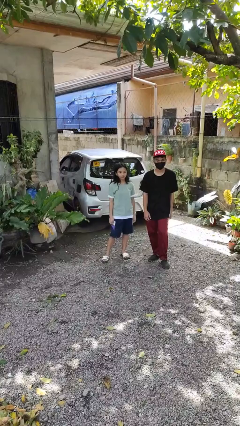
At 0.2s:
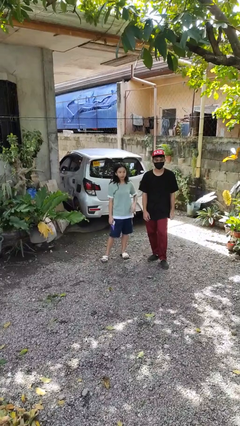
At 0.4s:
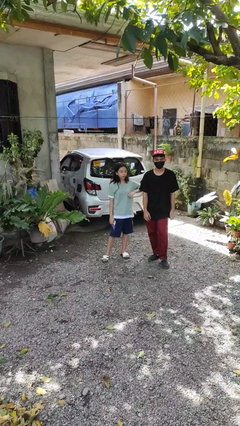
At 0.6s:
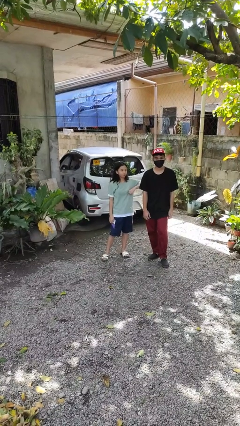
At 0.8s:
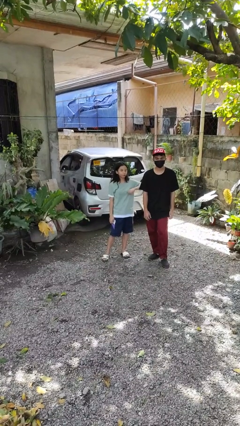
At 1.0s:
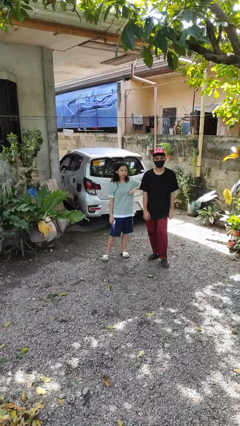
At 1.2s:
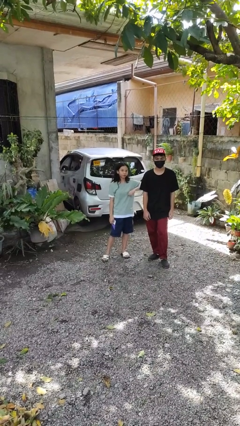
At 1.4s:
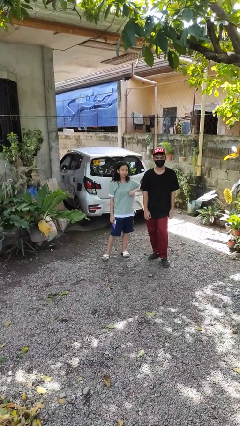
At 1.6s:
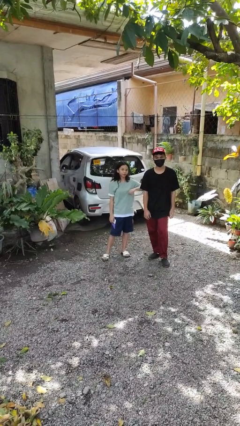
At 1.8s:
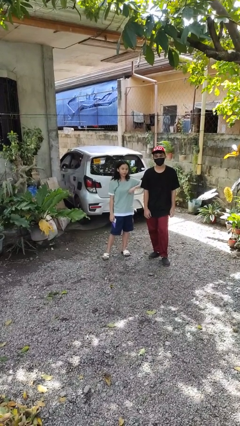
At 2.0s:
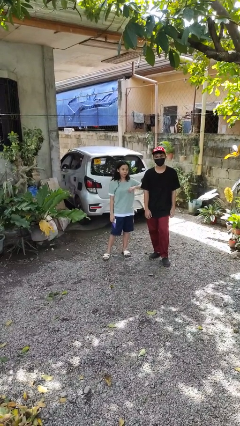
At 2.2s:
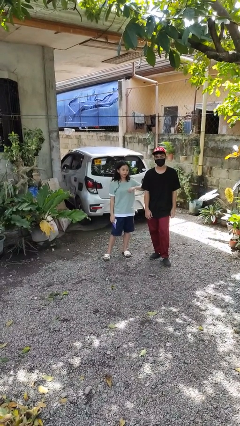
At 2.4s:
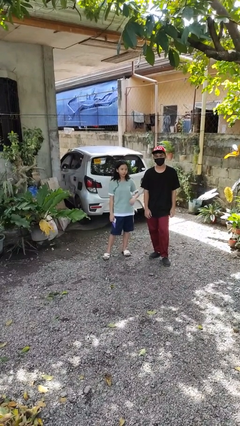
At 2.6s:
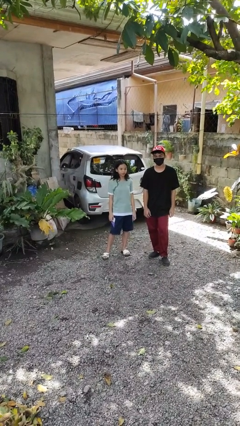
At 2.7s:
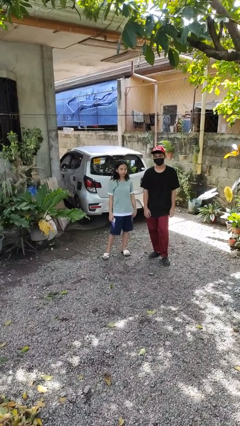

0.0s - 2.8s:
person nudges person with elbow

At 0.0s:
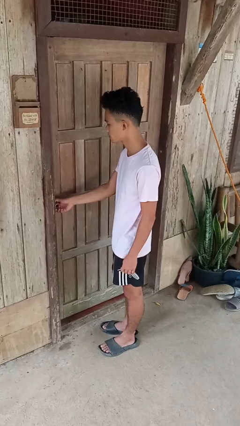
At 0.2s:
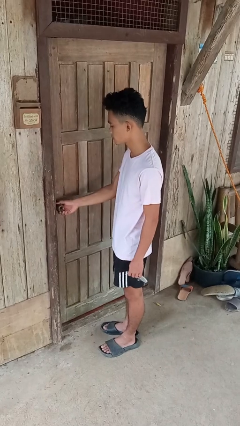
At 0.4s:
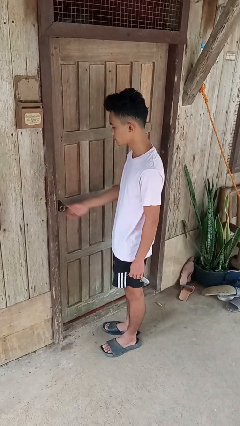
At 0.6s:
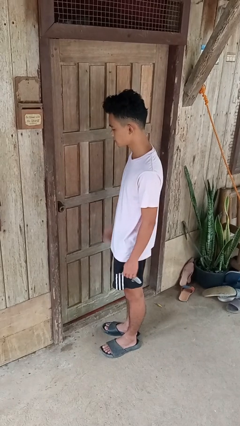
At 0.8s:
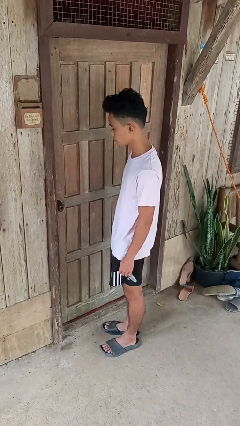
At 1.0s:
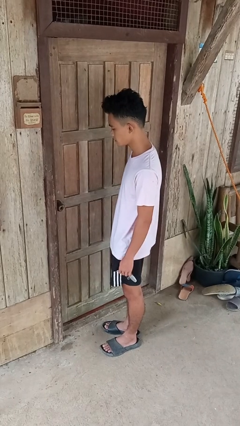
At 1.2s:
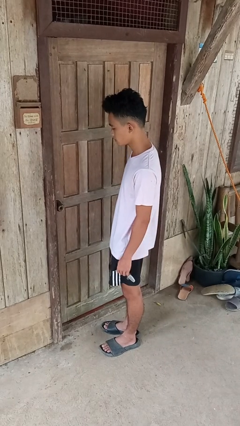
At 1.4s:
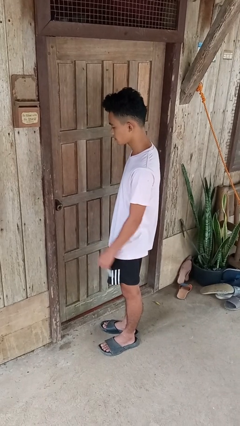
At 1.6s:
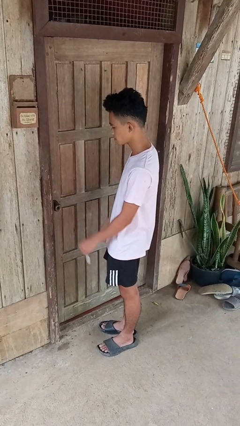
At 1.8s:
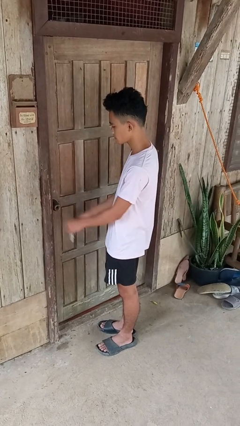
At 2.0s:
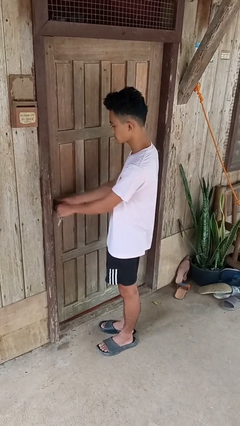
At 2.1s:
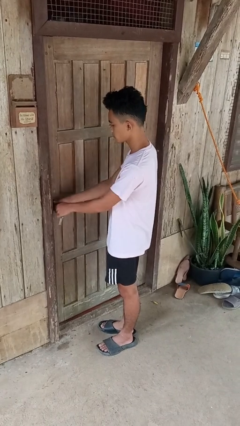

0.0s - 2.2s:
person closes facility door

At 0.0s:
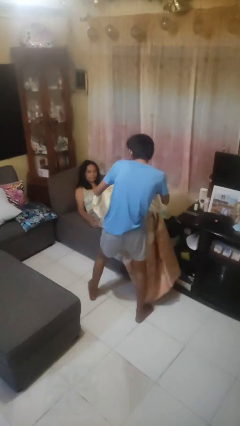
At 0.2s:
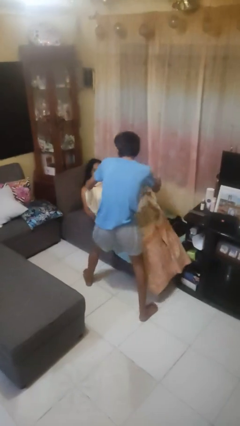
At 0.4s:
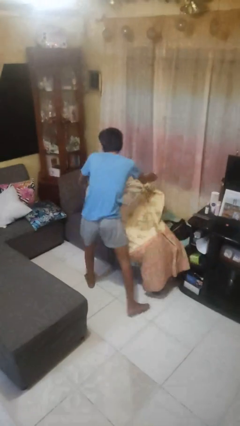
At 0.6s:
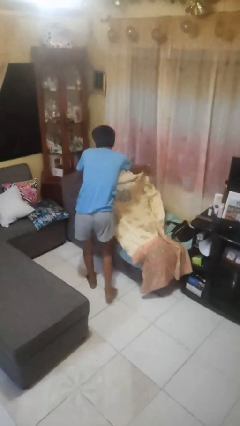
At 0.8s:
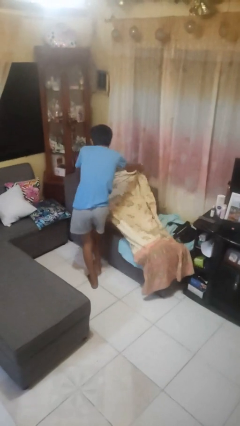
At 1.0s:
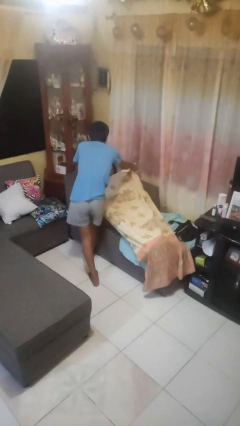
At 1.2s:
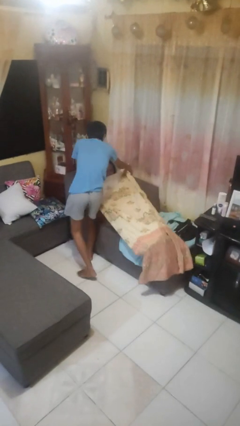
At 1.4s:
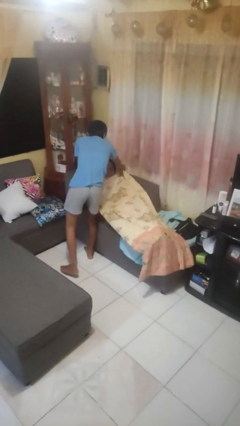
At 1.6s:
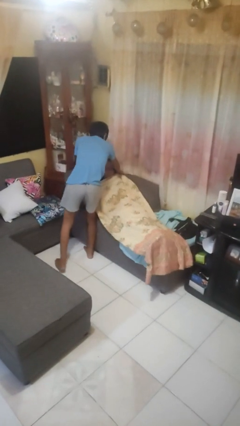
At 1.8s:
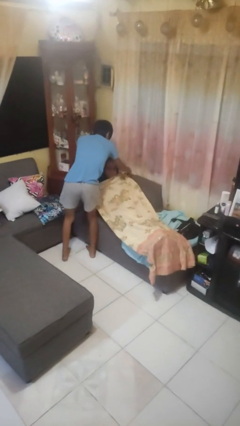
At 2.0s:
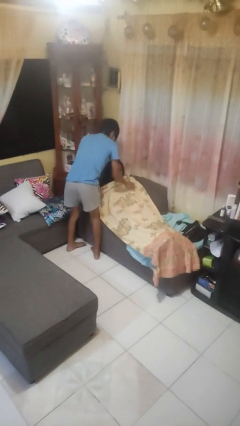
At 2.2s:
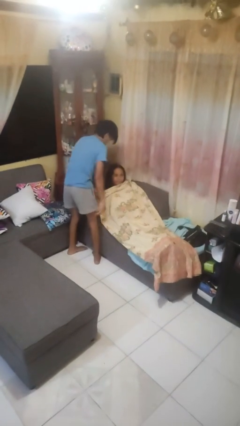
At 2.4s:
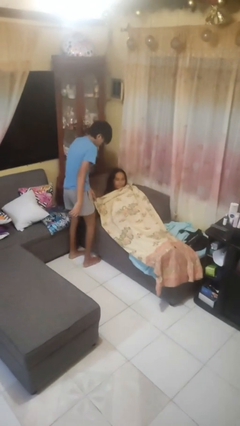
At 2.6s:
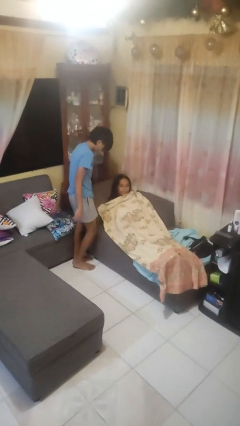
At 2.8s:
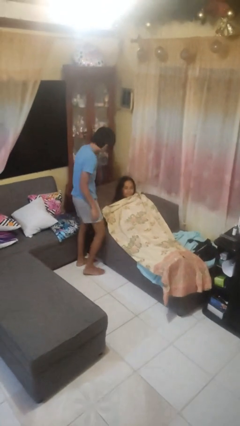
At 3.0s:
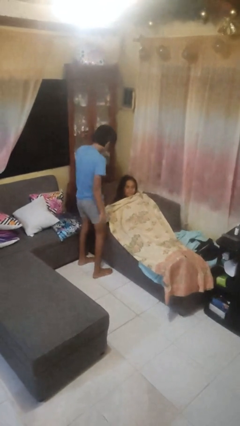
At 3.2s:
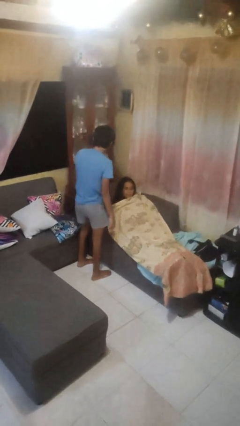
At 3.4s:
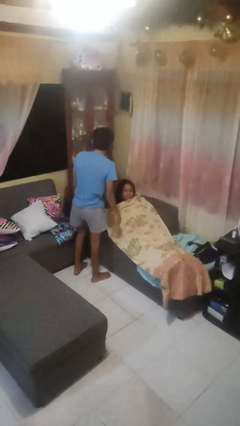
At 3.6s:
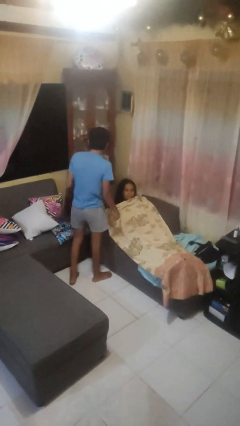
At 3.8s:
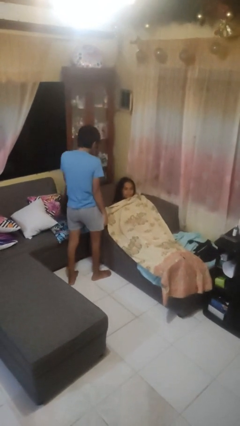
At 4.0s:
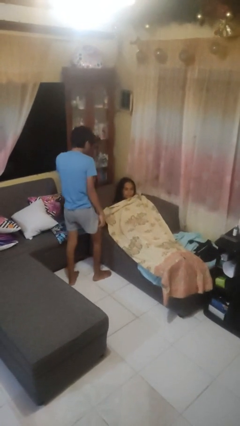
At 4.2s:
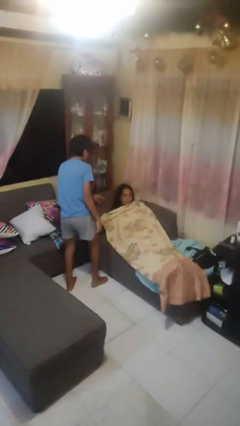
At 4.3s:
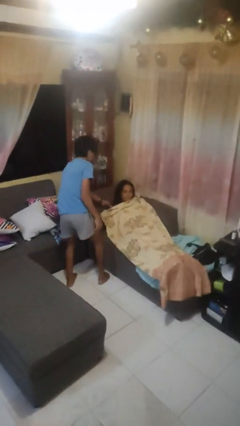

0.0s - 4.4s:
person covers friend with blanket

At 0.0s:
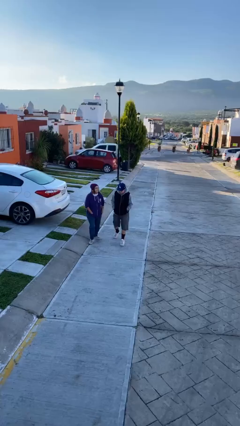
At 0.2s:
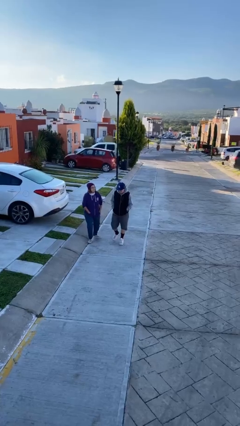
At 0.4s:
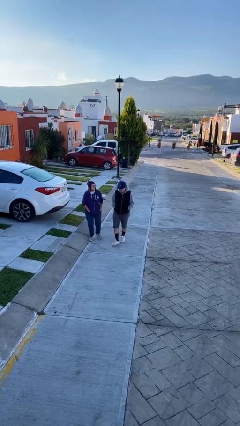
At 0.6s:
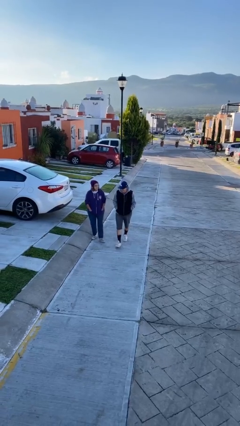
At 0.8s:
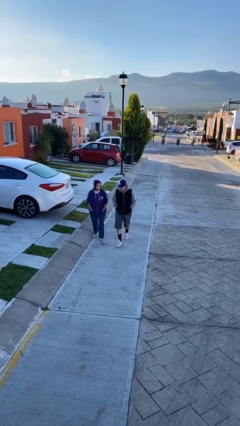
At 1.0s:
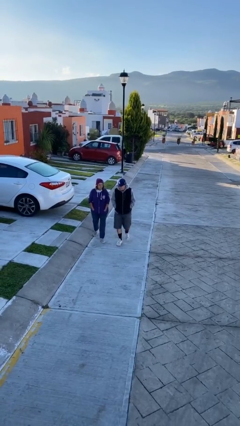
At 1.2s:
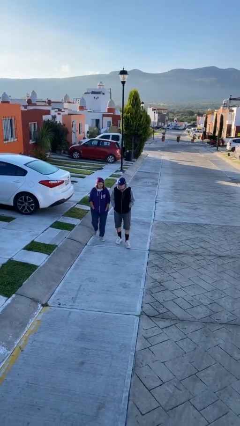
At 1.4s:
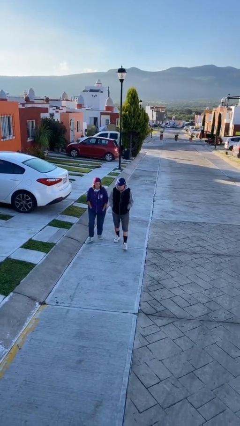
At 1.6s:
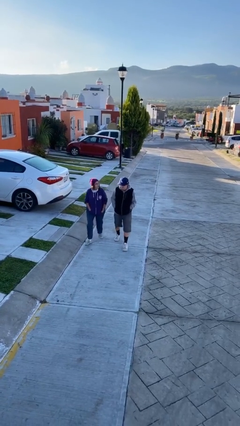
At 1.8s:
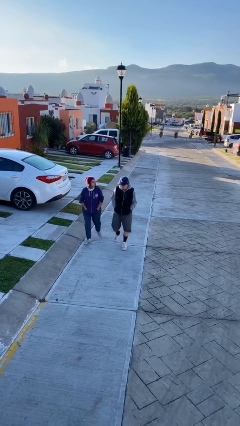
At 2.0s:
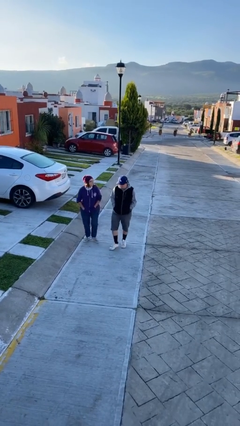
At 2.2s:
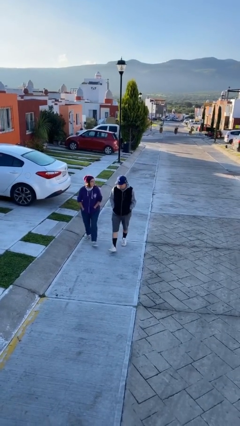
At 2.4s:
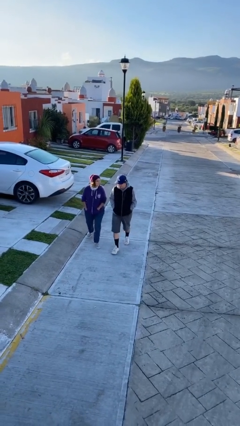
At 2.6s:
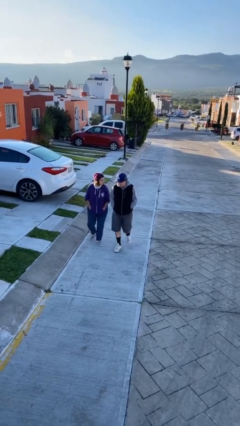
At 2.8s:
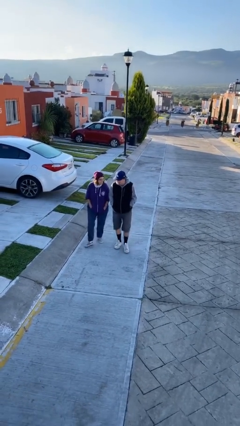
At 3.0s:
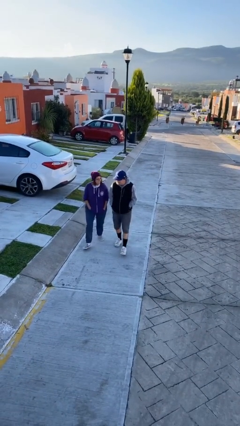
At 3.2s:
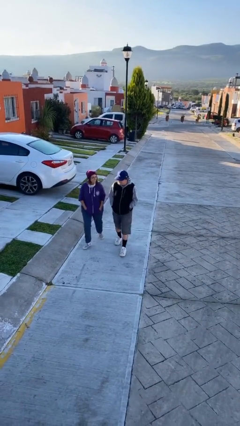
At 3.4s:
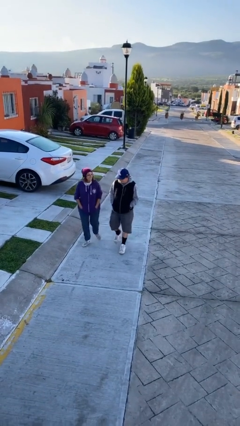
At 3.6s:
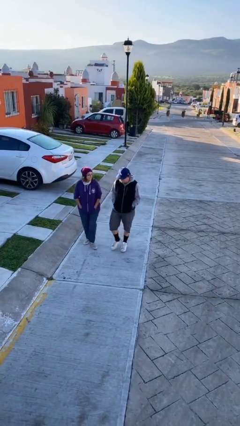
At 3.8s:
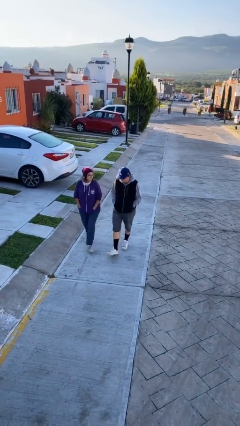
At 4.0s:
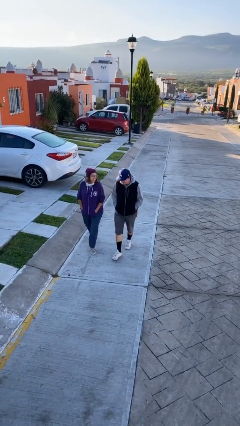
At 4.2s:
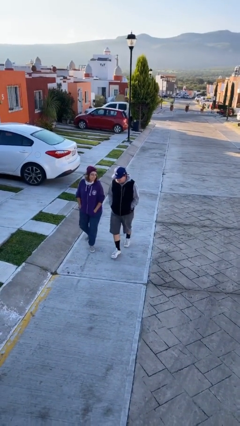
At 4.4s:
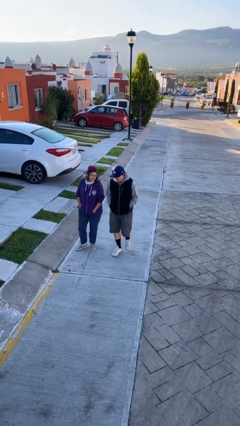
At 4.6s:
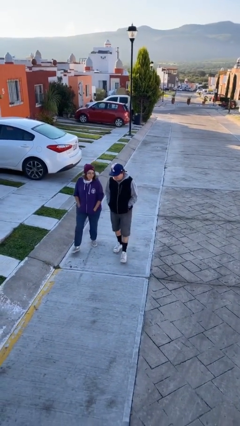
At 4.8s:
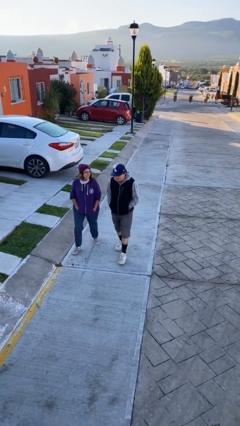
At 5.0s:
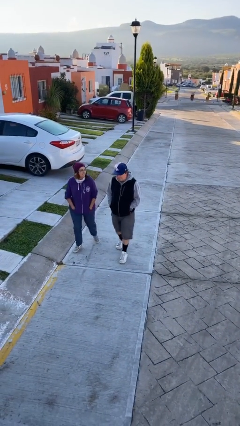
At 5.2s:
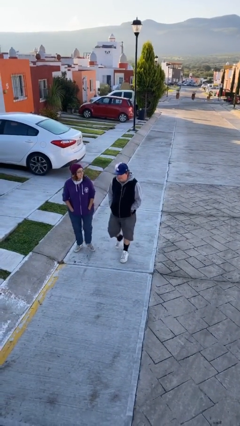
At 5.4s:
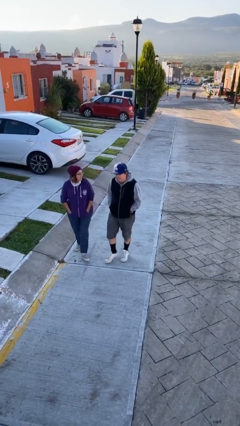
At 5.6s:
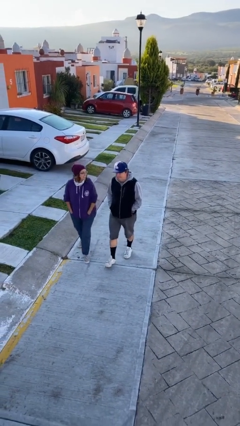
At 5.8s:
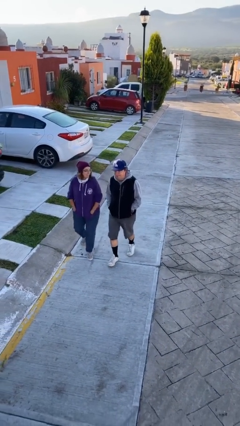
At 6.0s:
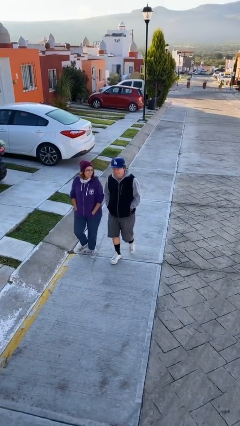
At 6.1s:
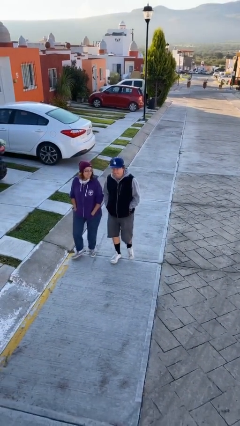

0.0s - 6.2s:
person talks to person

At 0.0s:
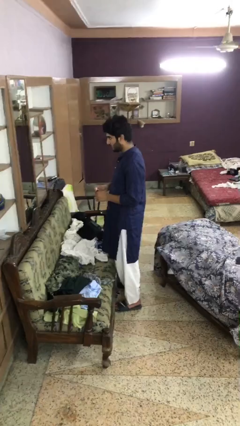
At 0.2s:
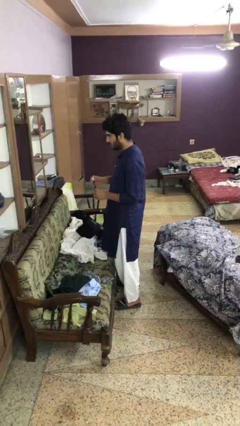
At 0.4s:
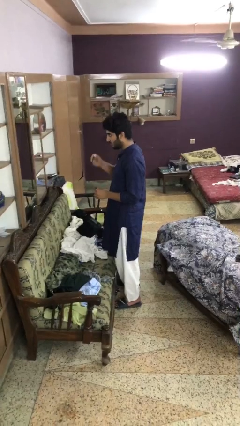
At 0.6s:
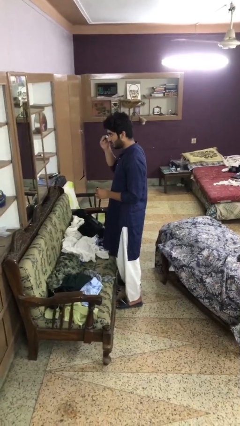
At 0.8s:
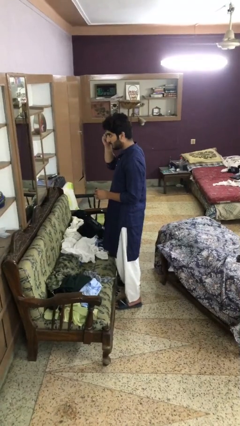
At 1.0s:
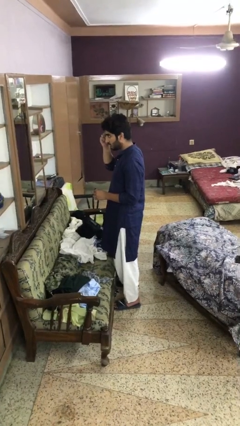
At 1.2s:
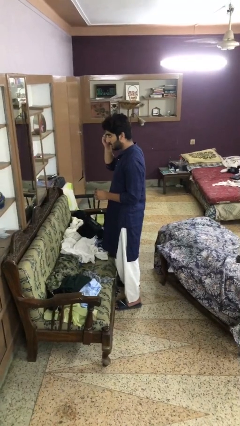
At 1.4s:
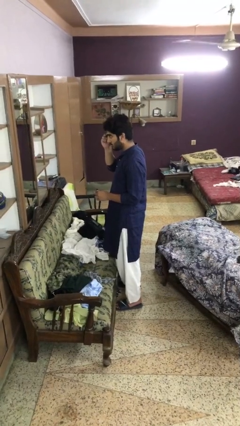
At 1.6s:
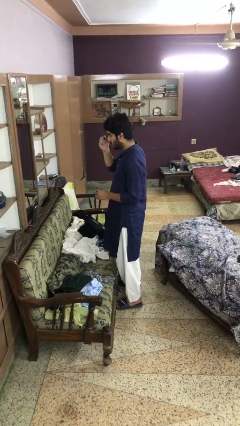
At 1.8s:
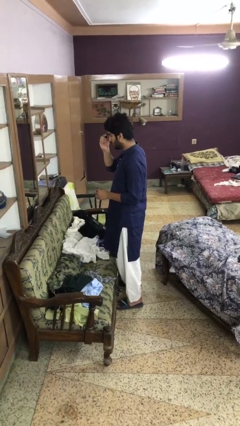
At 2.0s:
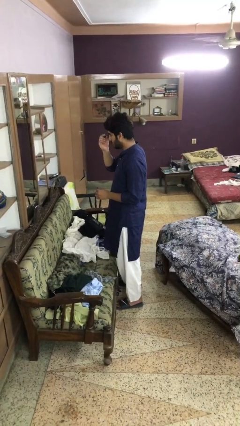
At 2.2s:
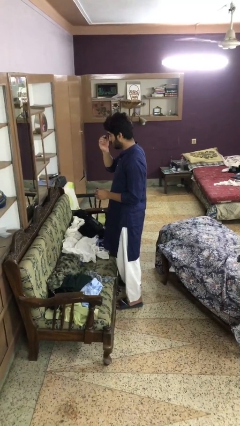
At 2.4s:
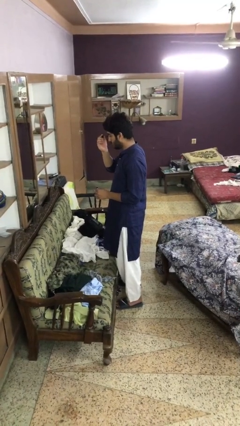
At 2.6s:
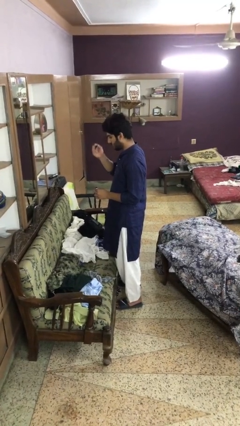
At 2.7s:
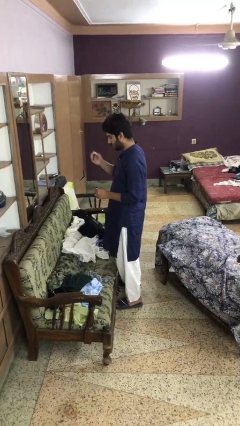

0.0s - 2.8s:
person applies eye makeup
